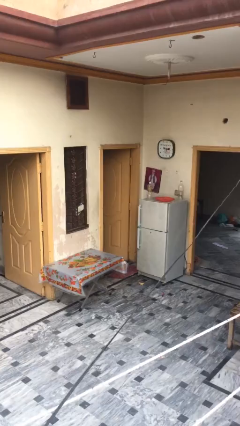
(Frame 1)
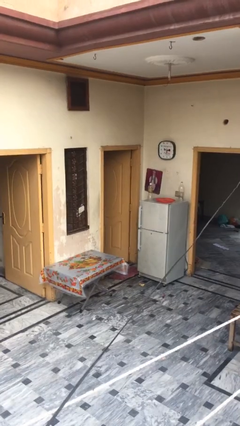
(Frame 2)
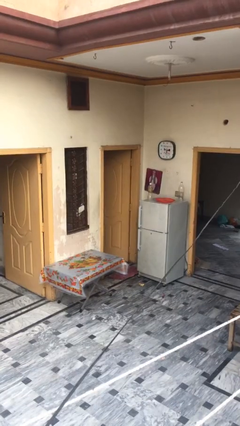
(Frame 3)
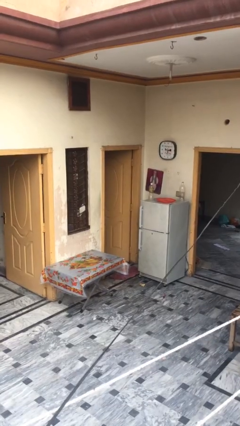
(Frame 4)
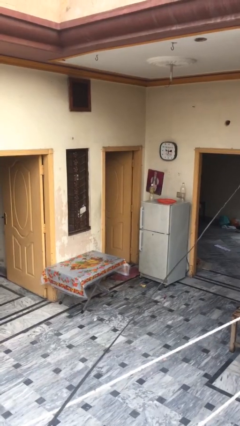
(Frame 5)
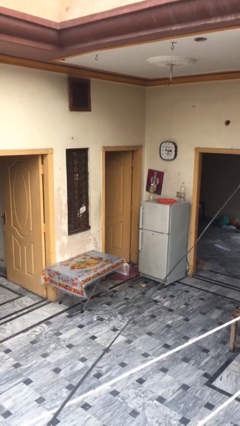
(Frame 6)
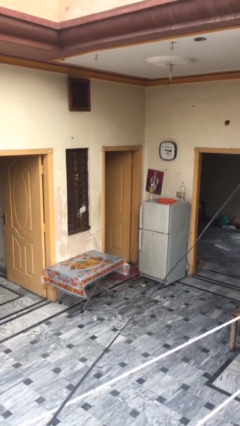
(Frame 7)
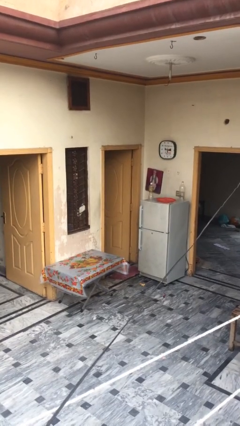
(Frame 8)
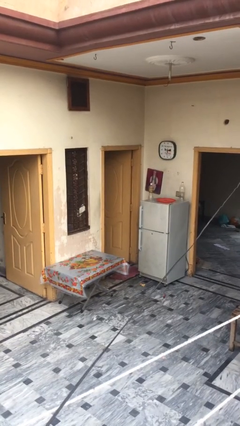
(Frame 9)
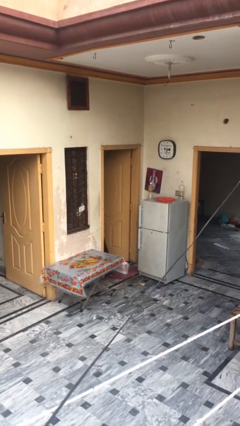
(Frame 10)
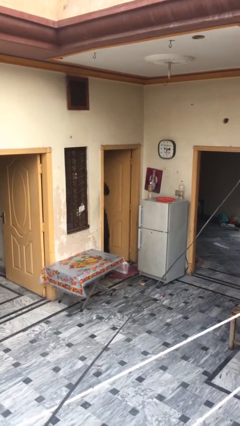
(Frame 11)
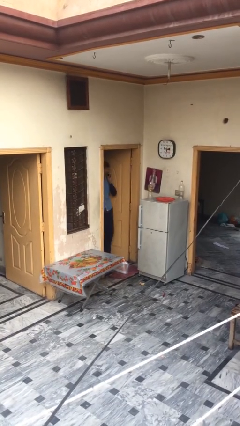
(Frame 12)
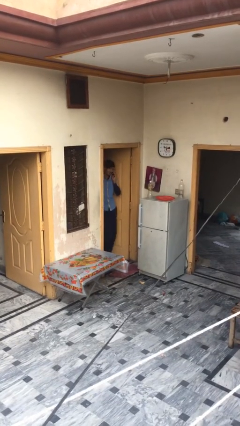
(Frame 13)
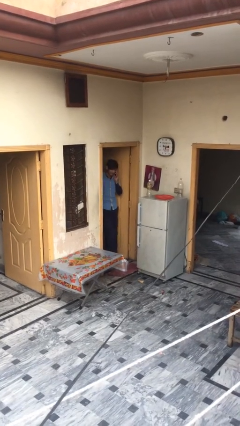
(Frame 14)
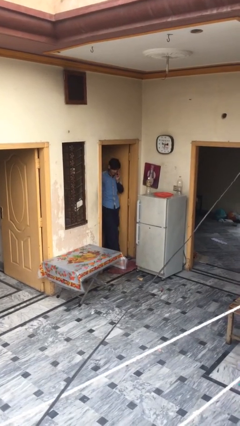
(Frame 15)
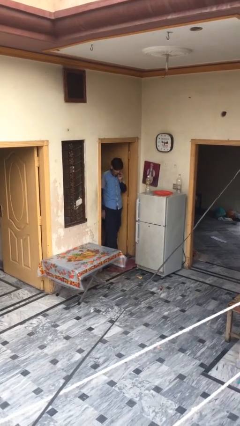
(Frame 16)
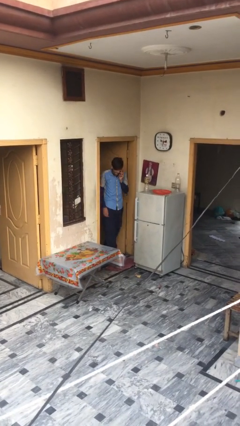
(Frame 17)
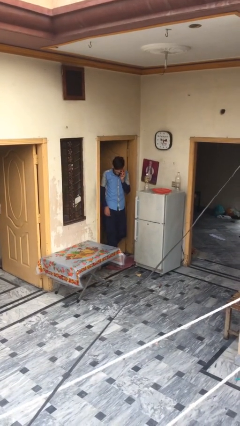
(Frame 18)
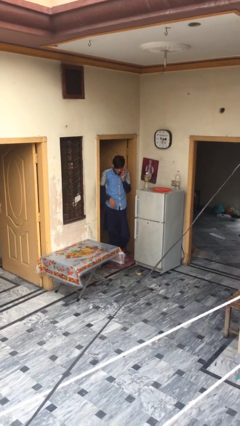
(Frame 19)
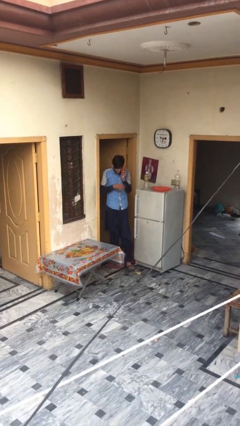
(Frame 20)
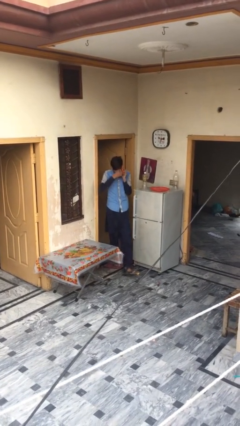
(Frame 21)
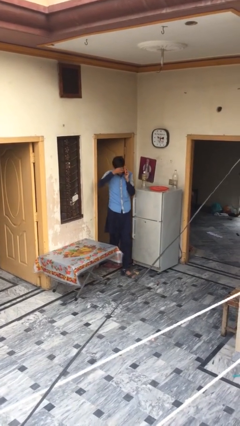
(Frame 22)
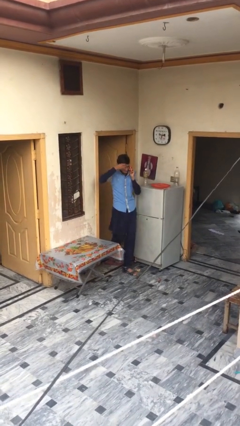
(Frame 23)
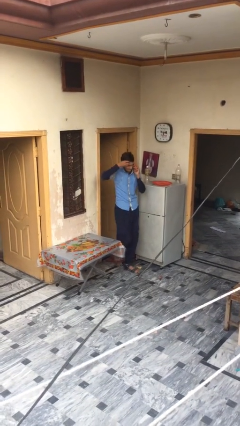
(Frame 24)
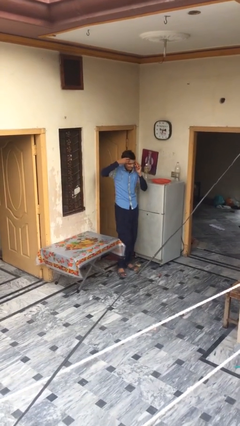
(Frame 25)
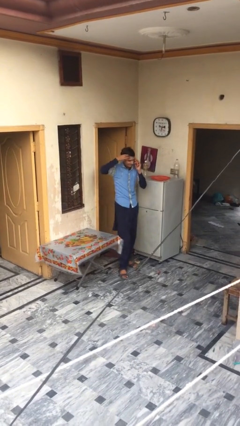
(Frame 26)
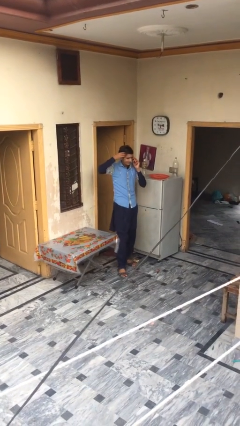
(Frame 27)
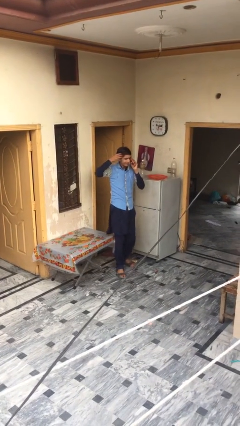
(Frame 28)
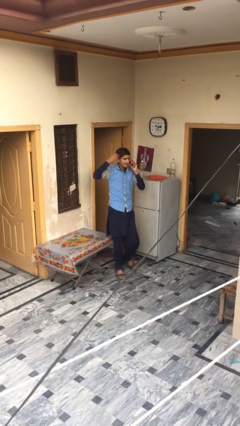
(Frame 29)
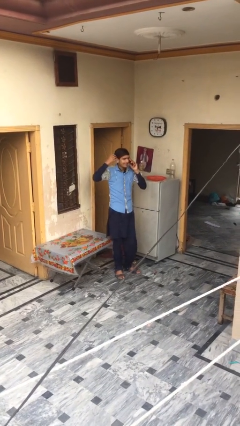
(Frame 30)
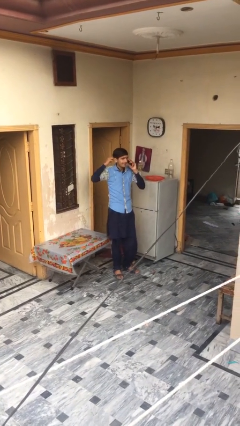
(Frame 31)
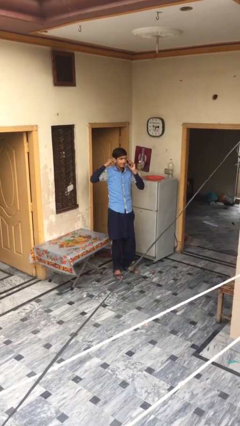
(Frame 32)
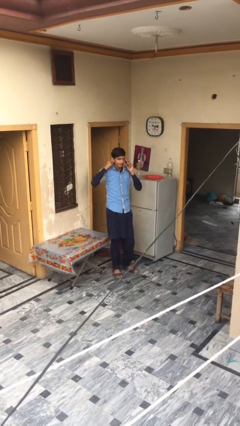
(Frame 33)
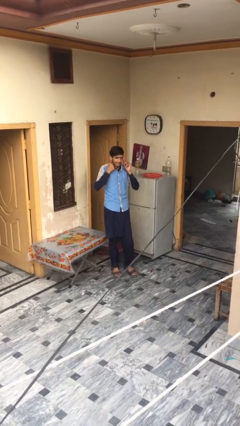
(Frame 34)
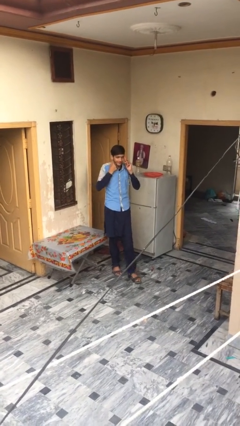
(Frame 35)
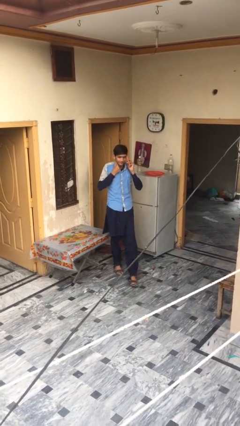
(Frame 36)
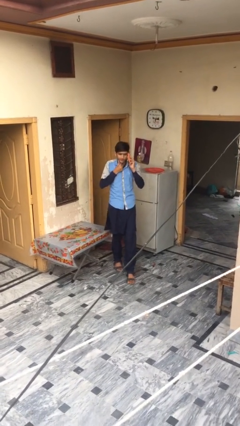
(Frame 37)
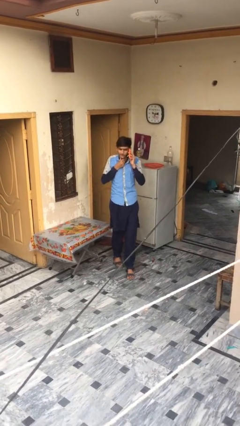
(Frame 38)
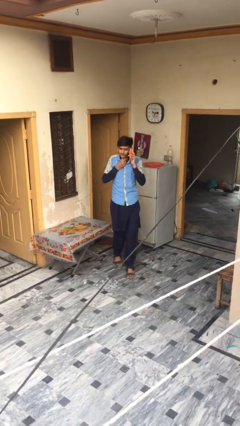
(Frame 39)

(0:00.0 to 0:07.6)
person enters scene through structure

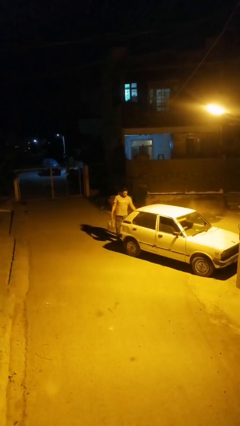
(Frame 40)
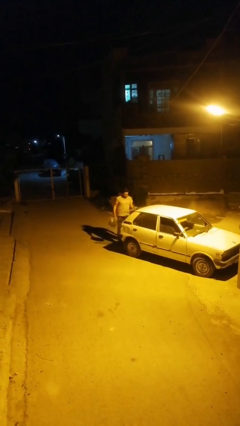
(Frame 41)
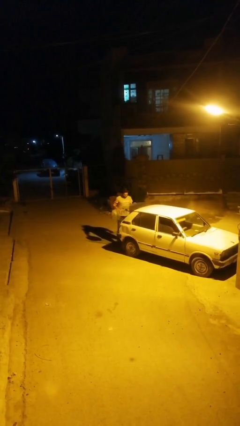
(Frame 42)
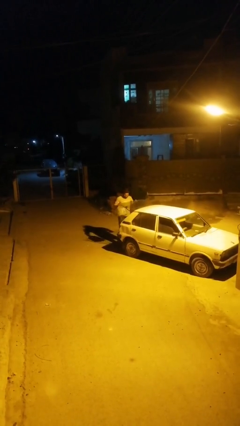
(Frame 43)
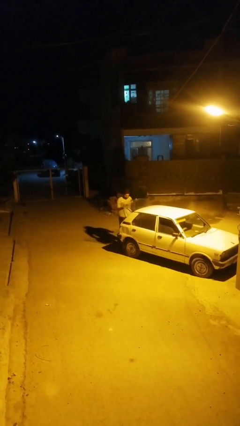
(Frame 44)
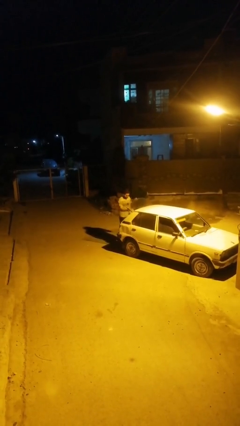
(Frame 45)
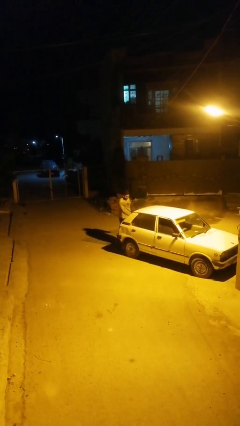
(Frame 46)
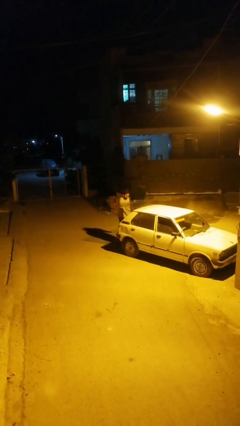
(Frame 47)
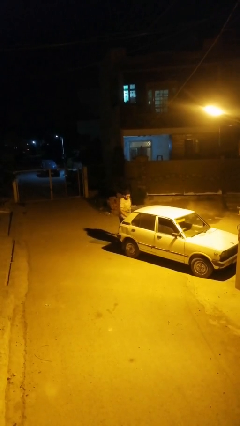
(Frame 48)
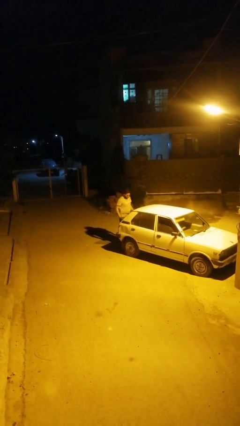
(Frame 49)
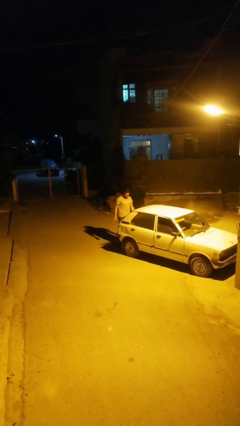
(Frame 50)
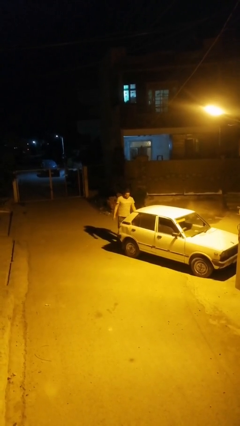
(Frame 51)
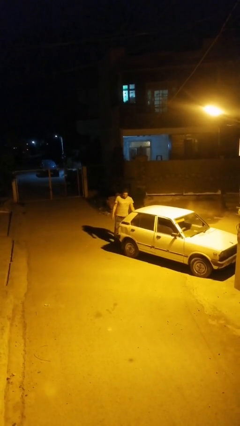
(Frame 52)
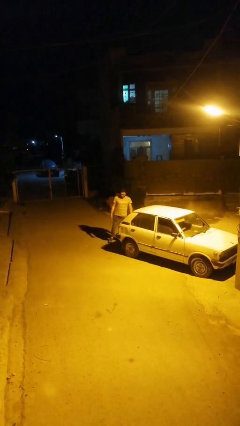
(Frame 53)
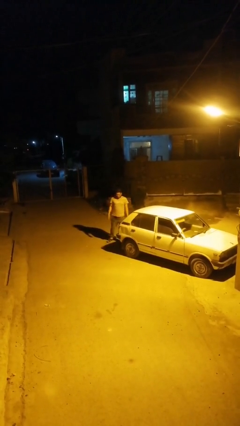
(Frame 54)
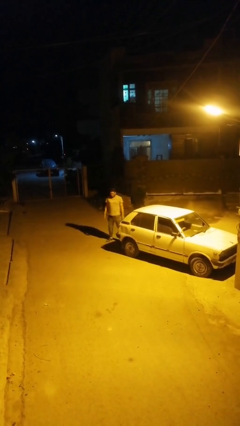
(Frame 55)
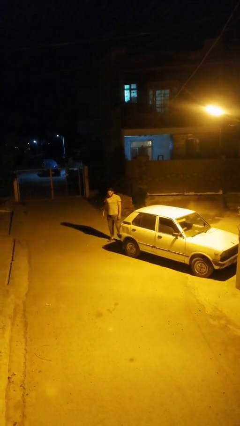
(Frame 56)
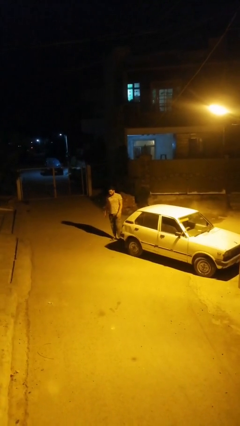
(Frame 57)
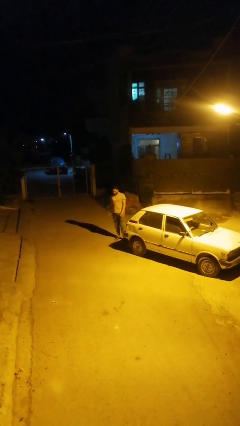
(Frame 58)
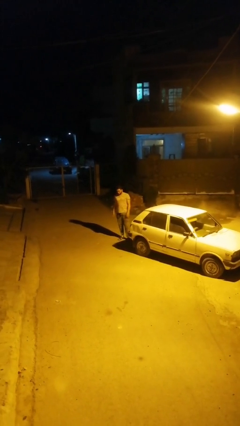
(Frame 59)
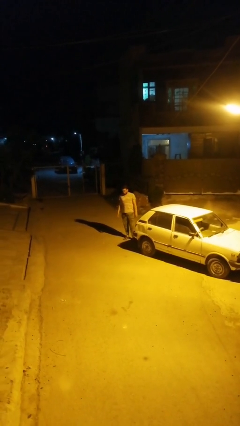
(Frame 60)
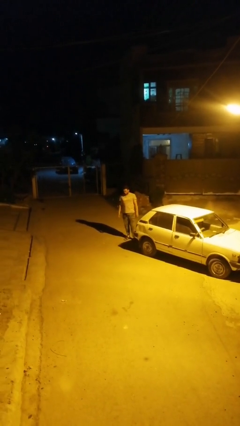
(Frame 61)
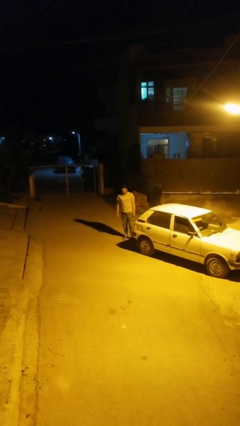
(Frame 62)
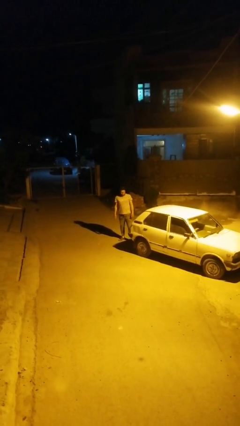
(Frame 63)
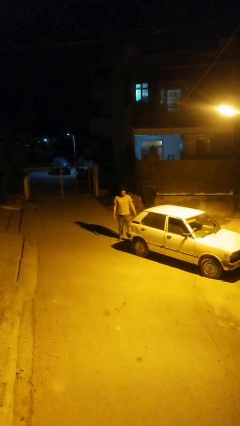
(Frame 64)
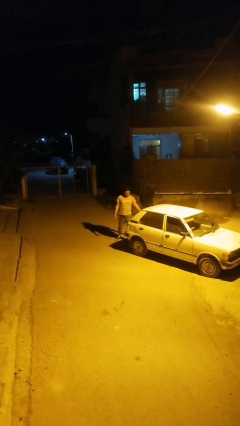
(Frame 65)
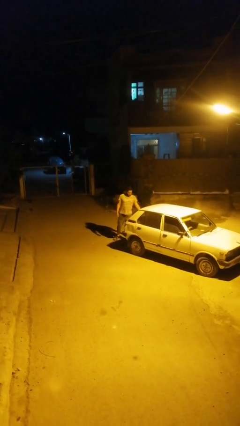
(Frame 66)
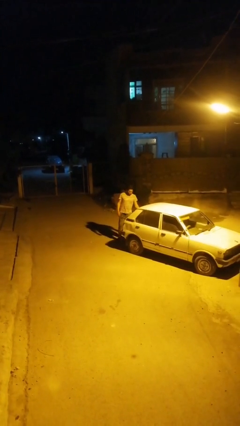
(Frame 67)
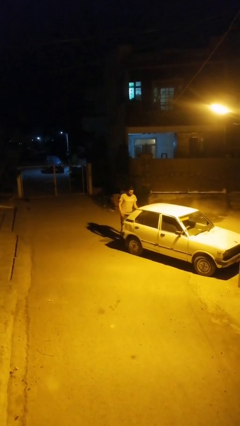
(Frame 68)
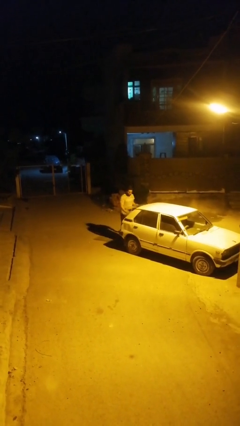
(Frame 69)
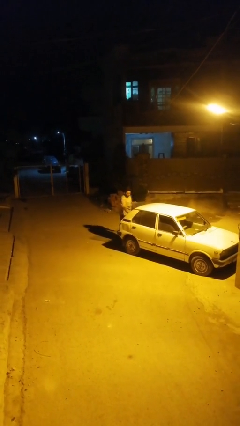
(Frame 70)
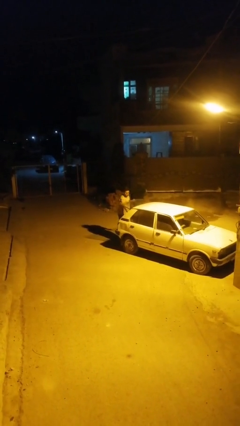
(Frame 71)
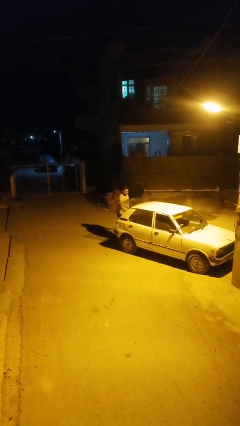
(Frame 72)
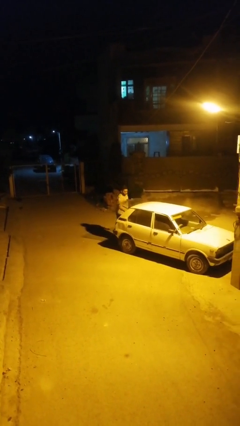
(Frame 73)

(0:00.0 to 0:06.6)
person loads car

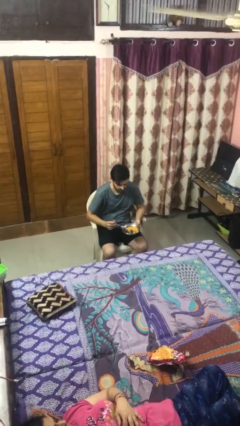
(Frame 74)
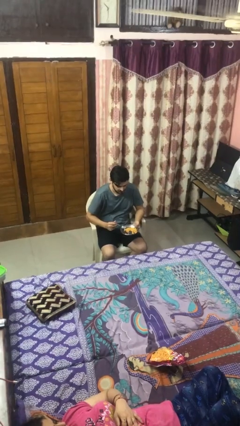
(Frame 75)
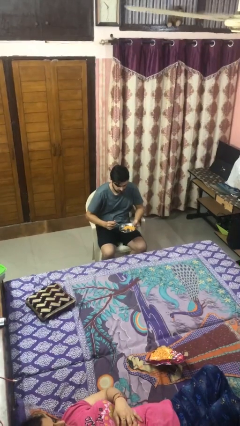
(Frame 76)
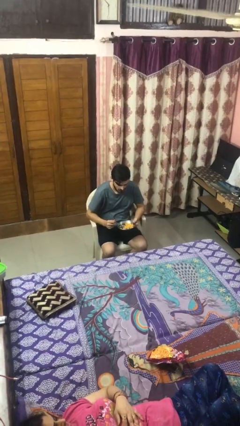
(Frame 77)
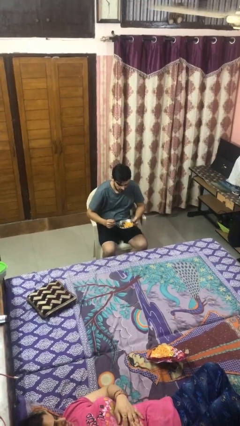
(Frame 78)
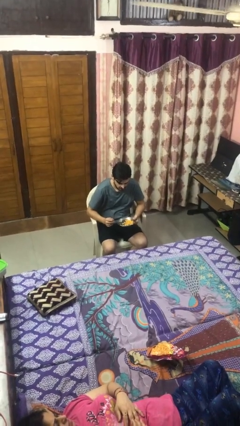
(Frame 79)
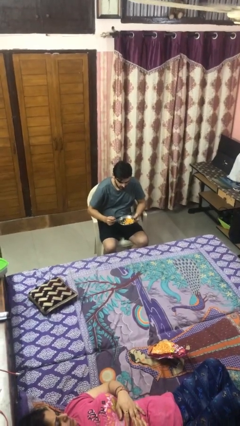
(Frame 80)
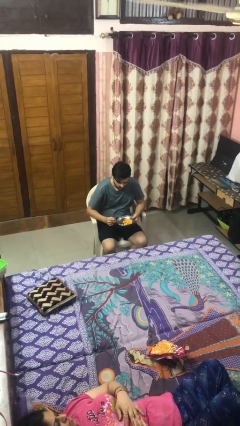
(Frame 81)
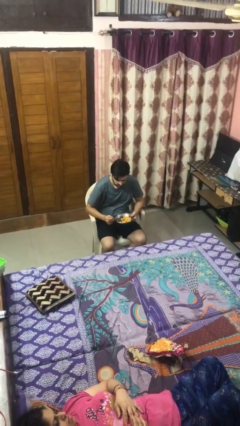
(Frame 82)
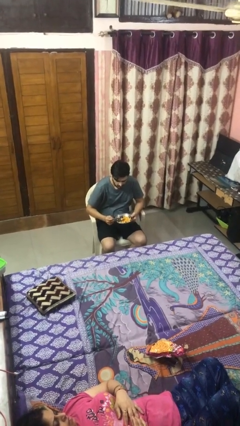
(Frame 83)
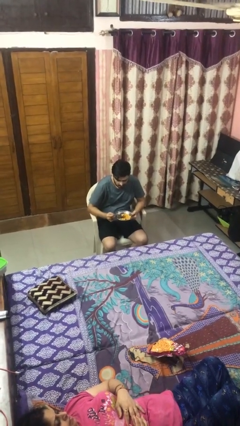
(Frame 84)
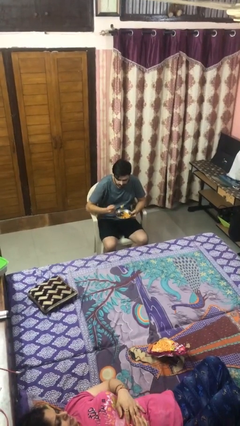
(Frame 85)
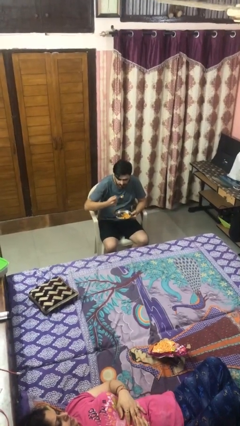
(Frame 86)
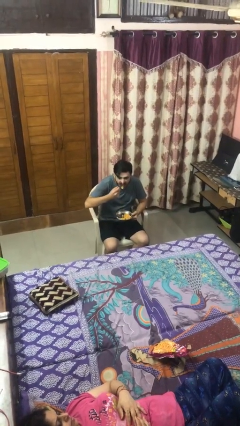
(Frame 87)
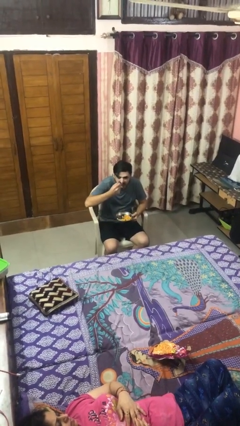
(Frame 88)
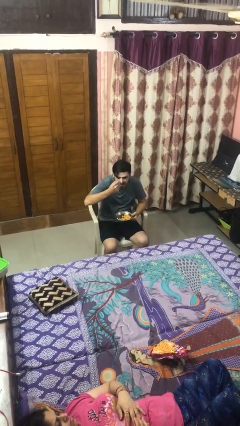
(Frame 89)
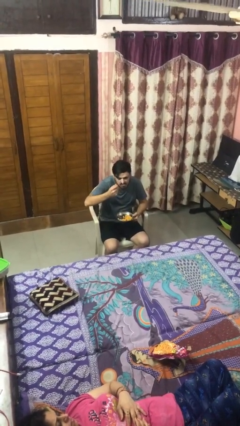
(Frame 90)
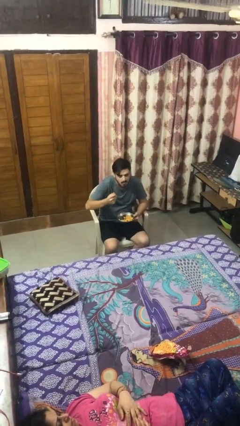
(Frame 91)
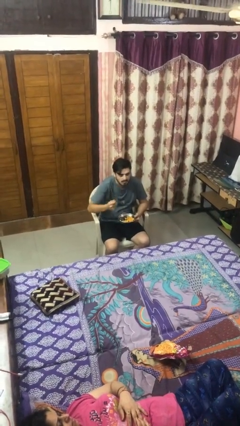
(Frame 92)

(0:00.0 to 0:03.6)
person eats with utensil
